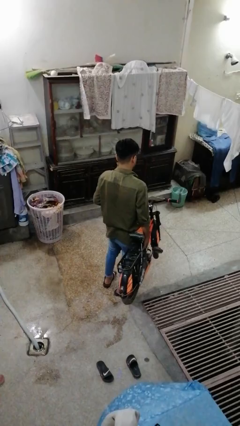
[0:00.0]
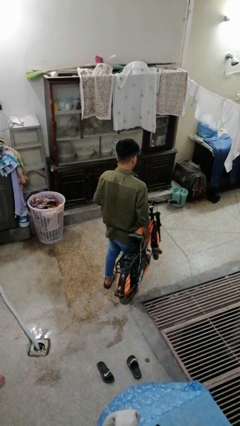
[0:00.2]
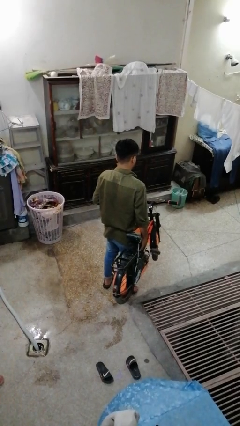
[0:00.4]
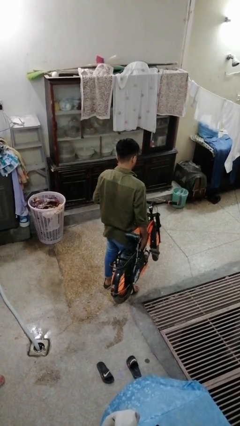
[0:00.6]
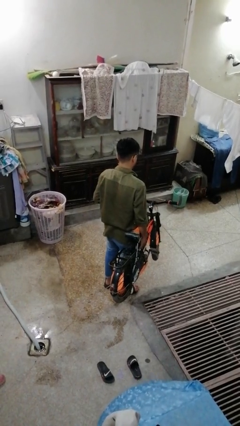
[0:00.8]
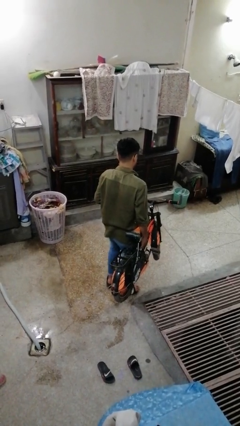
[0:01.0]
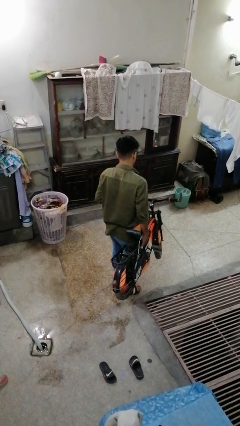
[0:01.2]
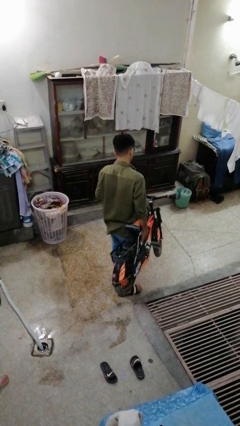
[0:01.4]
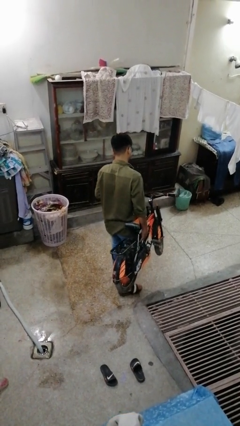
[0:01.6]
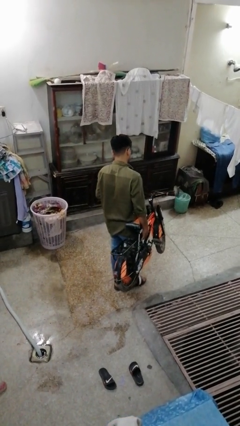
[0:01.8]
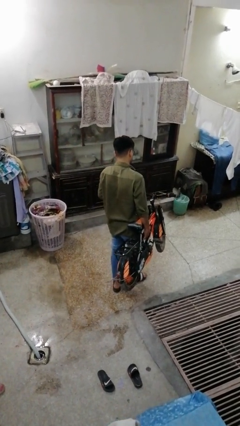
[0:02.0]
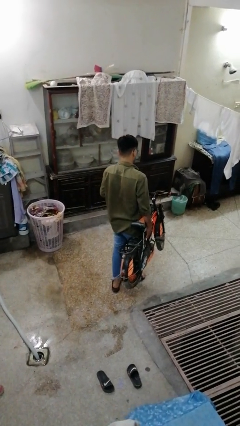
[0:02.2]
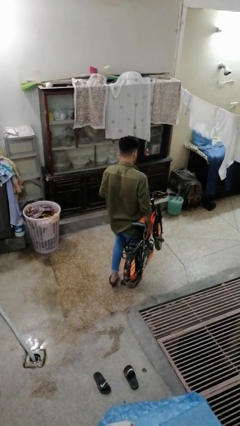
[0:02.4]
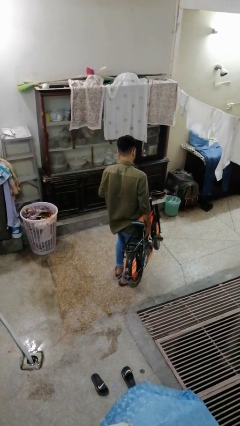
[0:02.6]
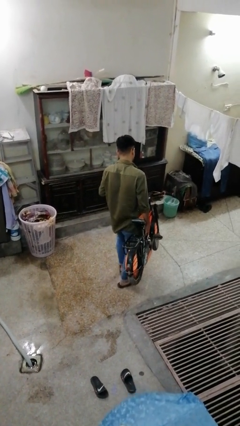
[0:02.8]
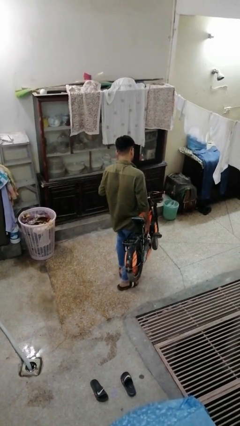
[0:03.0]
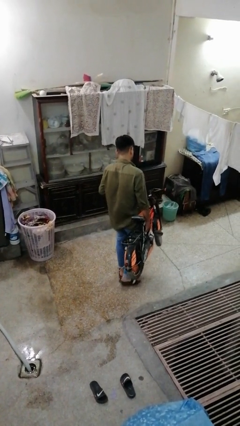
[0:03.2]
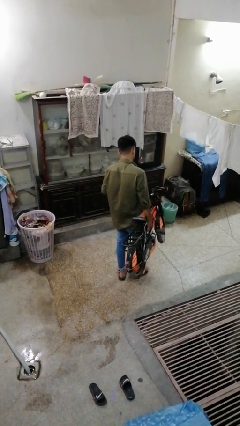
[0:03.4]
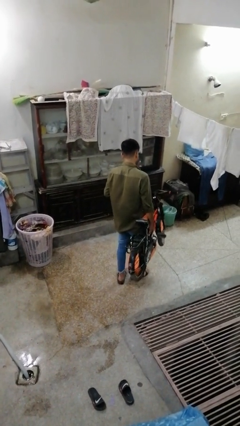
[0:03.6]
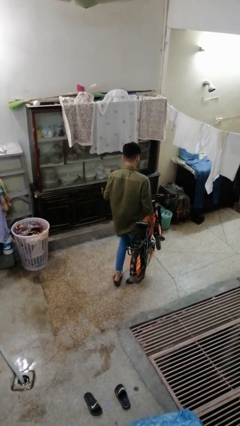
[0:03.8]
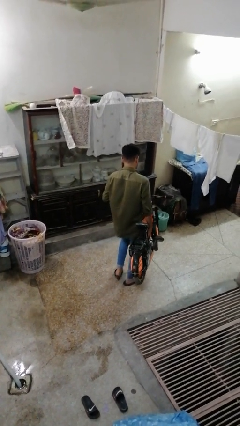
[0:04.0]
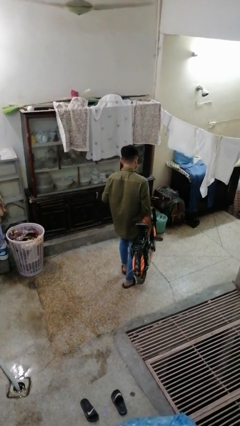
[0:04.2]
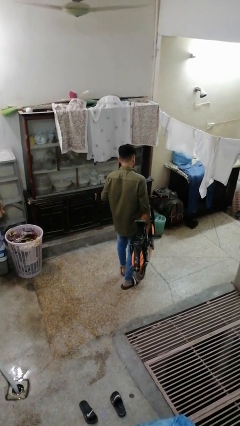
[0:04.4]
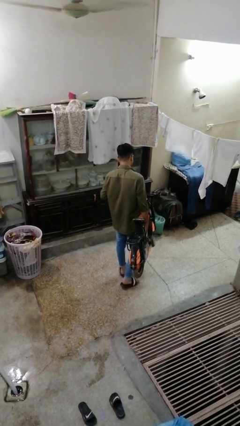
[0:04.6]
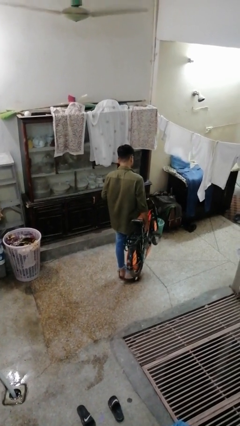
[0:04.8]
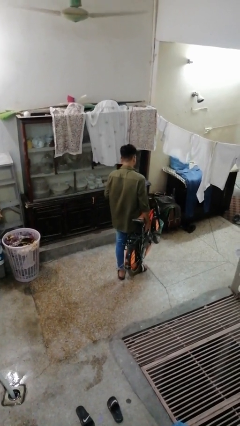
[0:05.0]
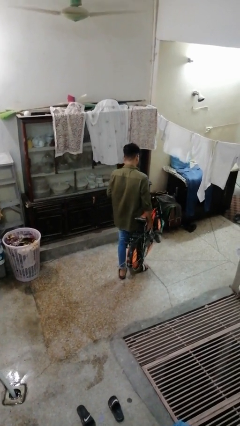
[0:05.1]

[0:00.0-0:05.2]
person carries bicycle

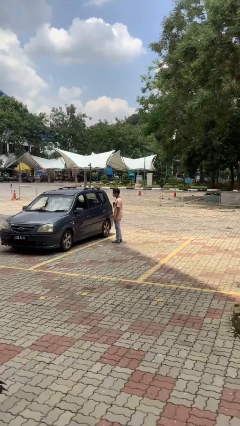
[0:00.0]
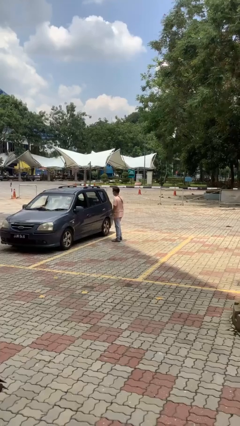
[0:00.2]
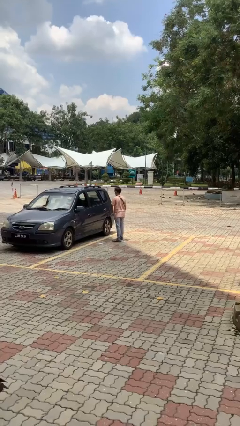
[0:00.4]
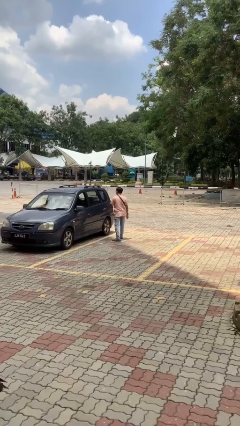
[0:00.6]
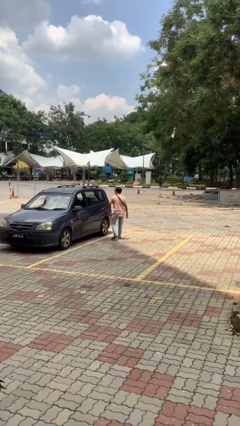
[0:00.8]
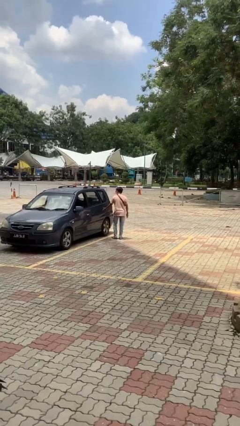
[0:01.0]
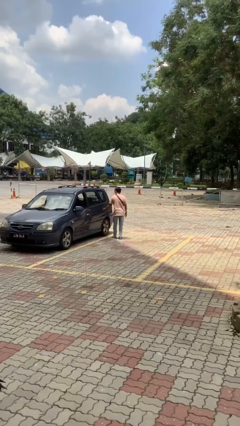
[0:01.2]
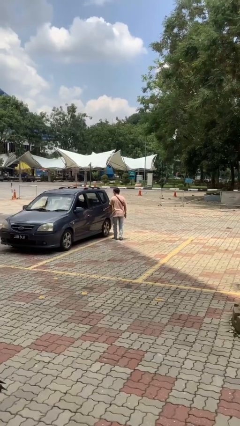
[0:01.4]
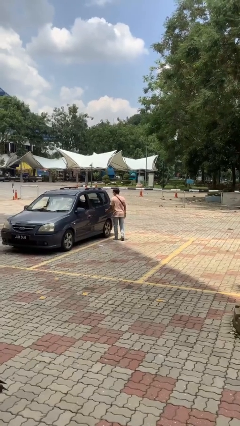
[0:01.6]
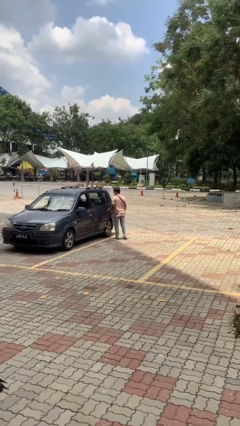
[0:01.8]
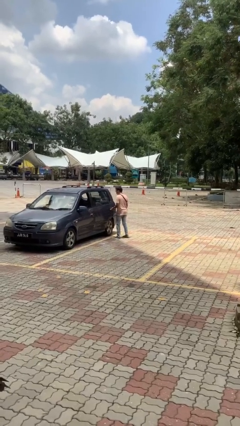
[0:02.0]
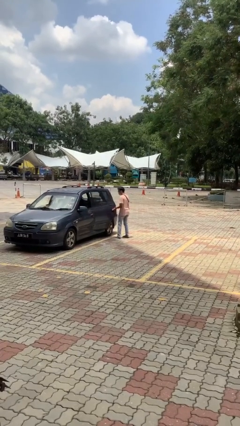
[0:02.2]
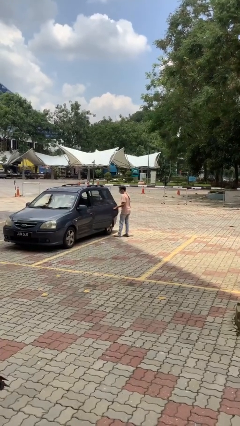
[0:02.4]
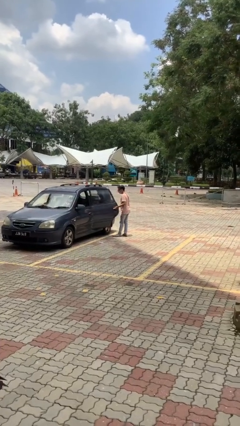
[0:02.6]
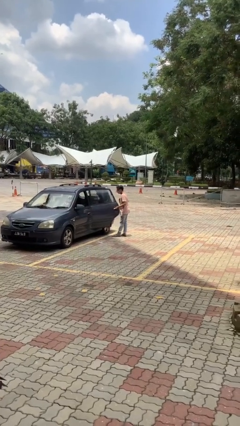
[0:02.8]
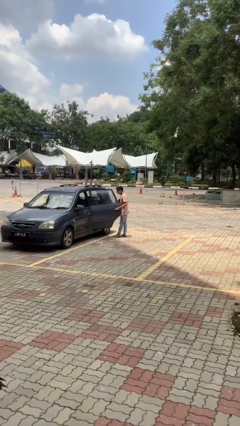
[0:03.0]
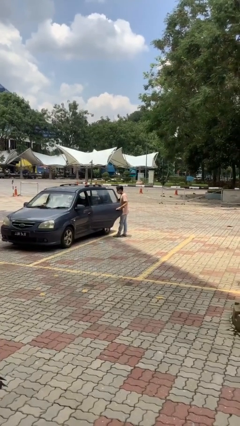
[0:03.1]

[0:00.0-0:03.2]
person opens car door

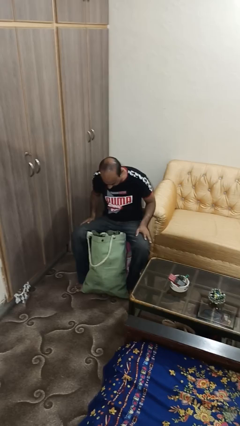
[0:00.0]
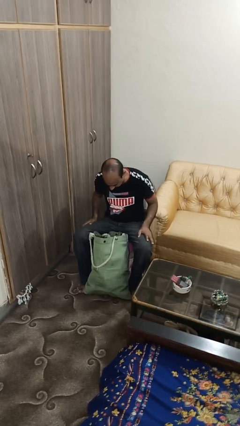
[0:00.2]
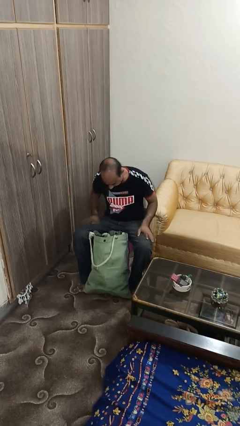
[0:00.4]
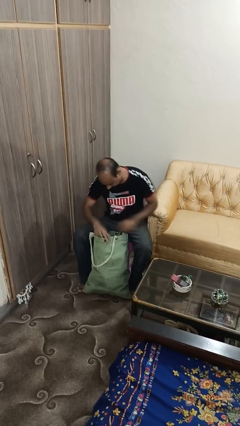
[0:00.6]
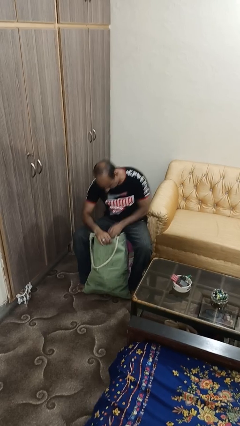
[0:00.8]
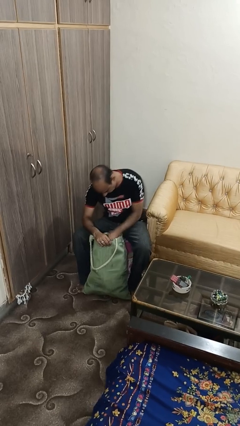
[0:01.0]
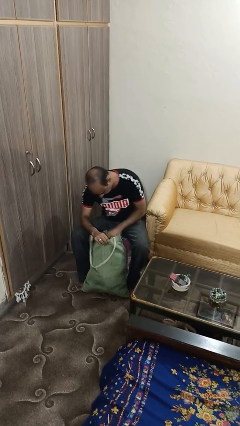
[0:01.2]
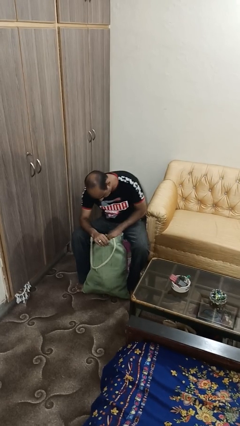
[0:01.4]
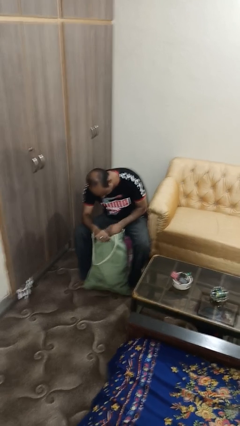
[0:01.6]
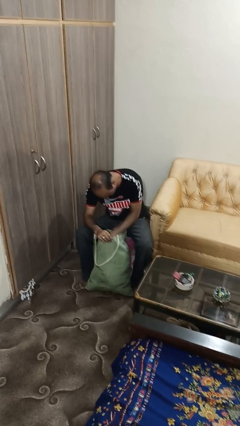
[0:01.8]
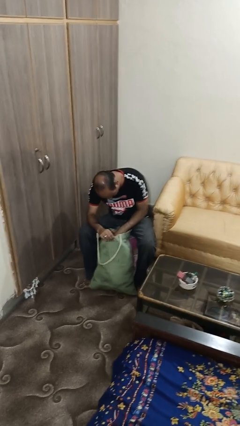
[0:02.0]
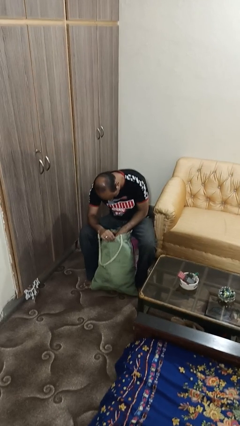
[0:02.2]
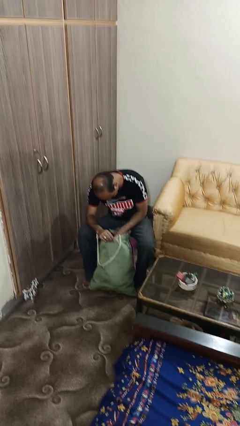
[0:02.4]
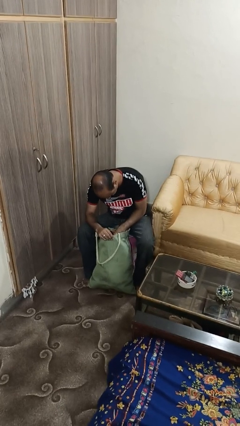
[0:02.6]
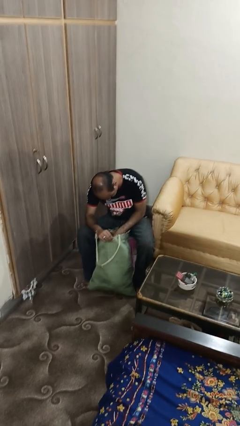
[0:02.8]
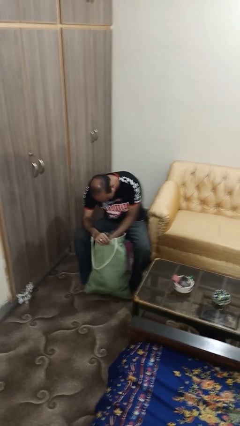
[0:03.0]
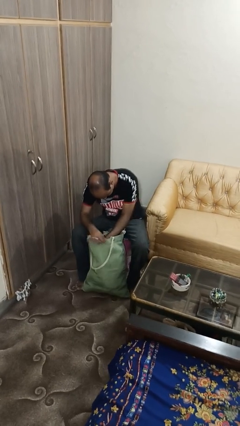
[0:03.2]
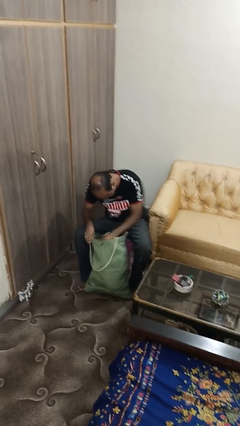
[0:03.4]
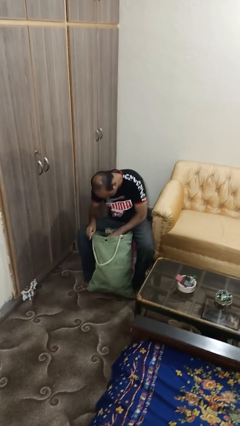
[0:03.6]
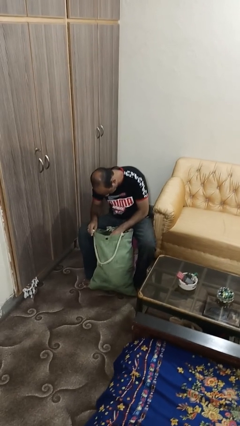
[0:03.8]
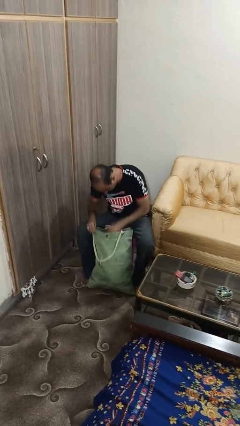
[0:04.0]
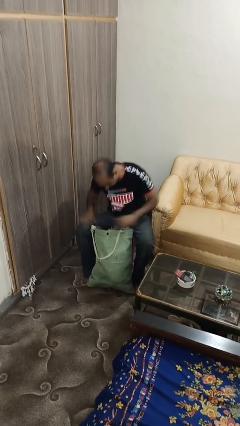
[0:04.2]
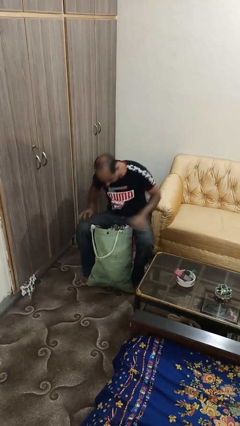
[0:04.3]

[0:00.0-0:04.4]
person searches in bag

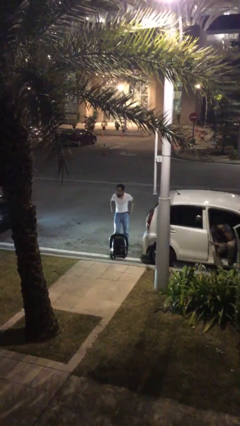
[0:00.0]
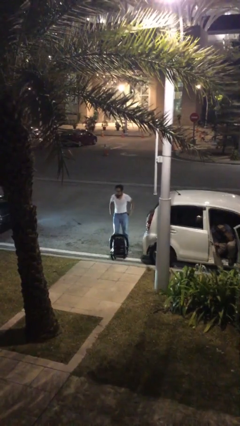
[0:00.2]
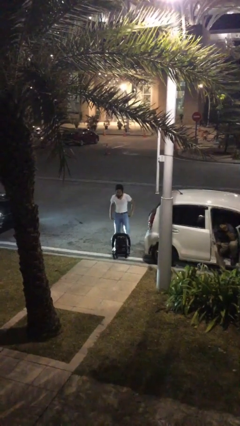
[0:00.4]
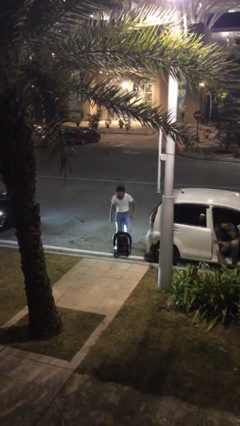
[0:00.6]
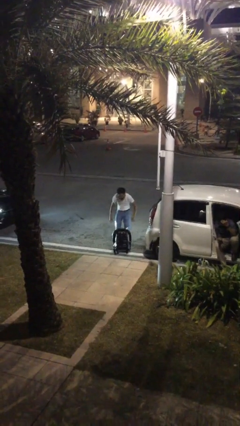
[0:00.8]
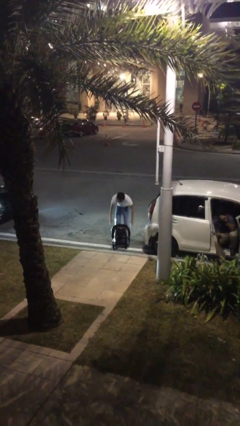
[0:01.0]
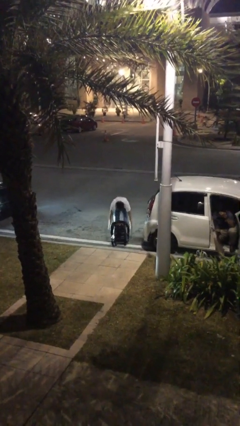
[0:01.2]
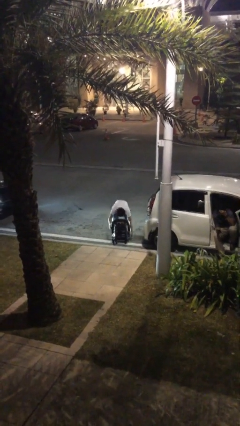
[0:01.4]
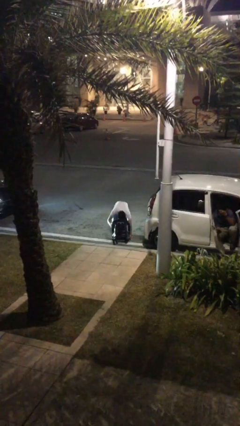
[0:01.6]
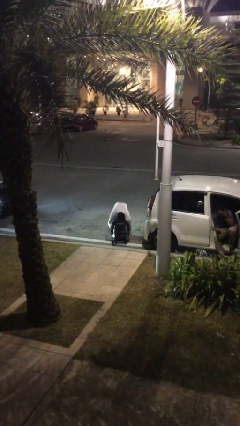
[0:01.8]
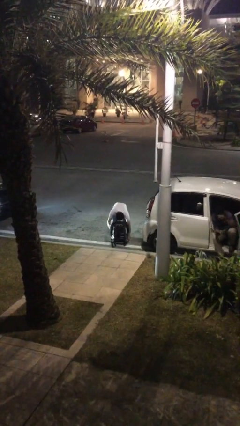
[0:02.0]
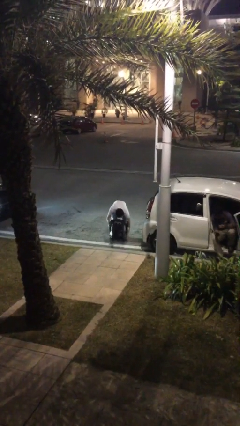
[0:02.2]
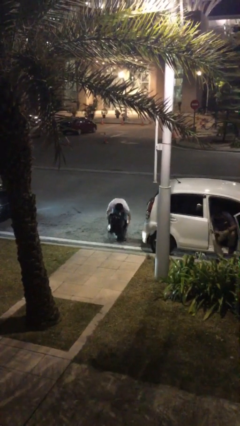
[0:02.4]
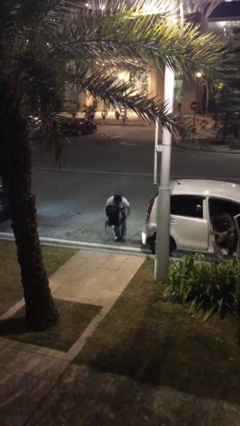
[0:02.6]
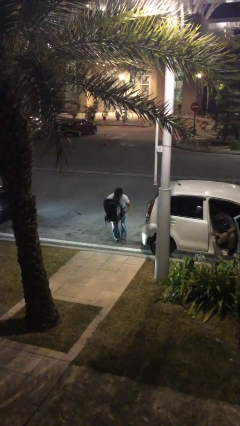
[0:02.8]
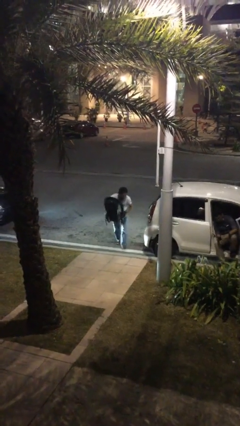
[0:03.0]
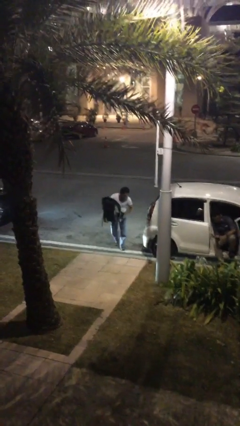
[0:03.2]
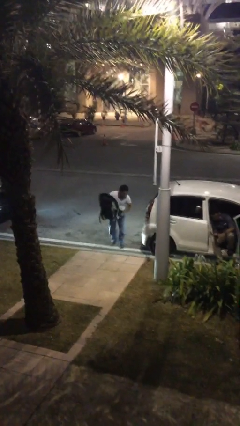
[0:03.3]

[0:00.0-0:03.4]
person picks up object from floor

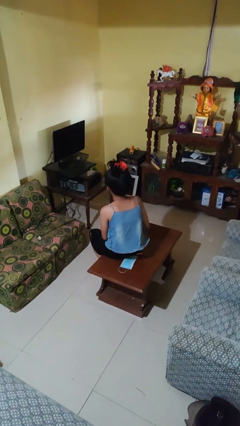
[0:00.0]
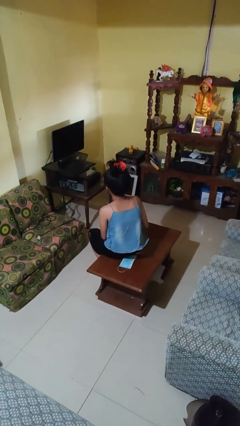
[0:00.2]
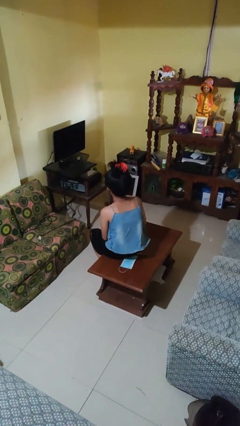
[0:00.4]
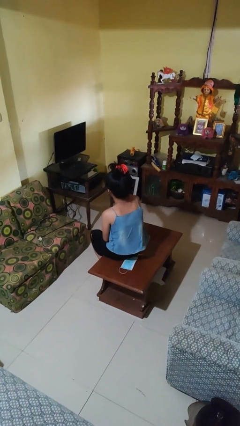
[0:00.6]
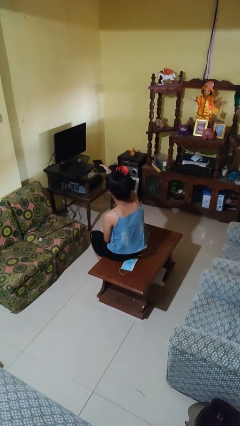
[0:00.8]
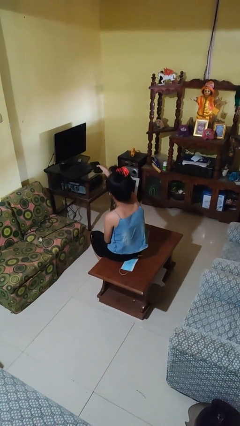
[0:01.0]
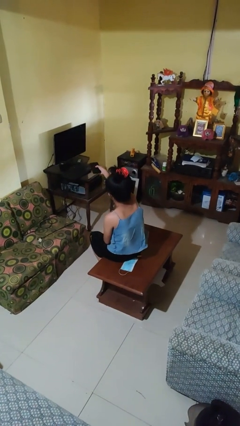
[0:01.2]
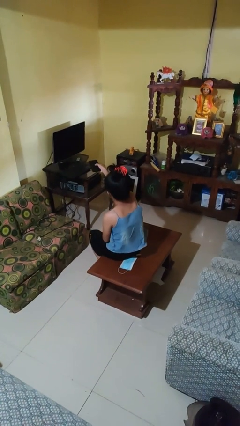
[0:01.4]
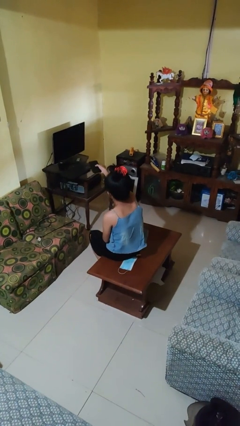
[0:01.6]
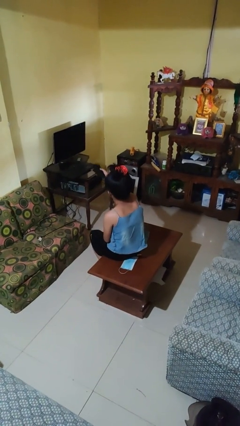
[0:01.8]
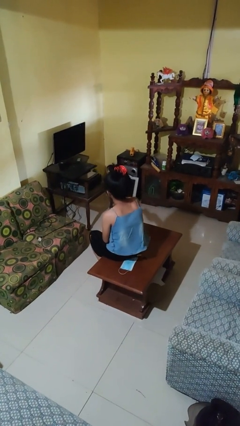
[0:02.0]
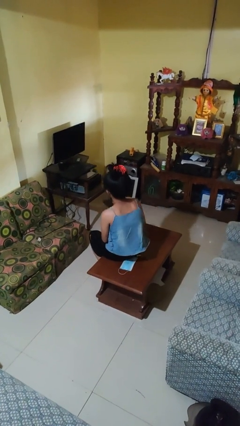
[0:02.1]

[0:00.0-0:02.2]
person uses television remote
